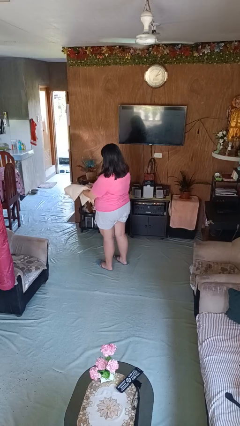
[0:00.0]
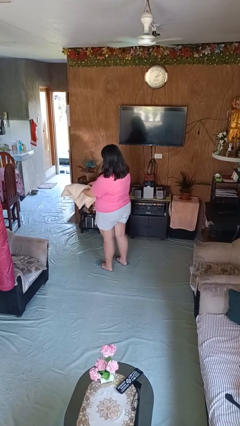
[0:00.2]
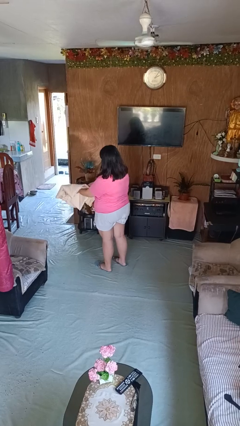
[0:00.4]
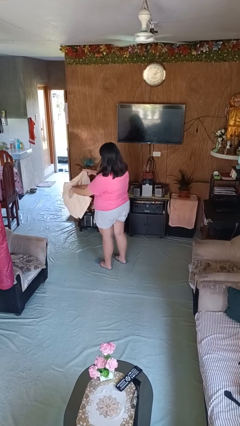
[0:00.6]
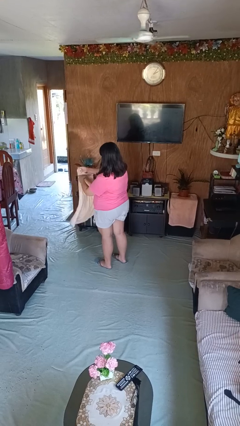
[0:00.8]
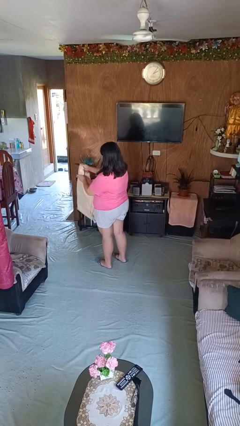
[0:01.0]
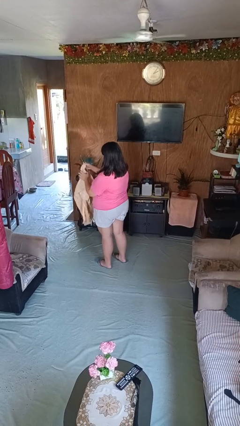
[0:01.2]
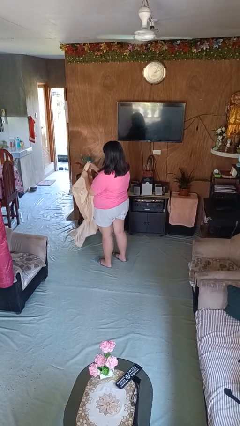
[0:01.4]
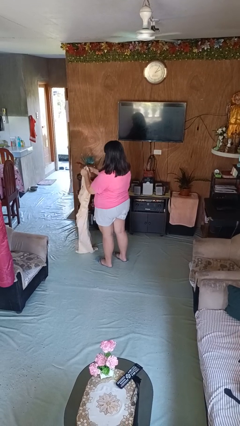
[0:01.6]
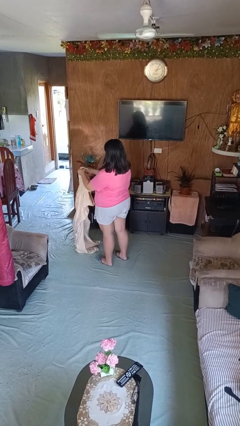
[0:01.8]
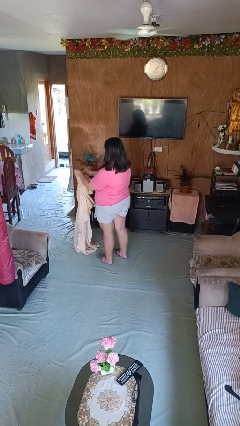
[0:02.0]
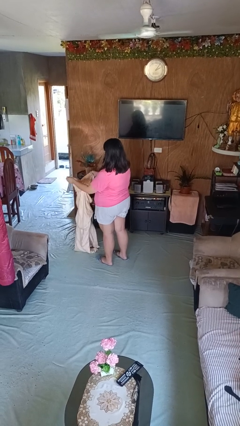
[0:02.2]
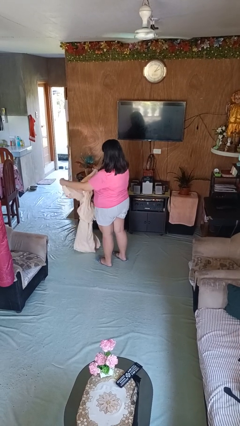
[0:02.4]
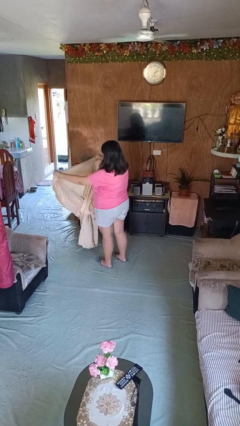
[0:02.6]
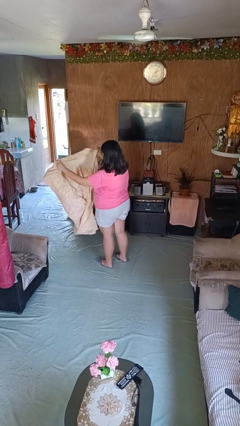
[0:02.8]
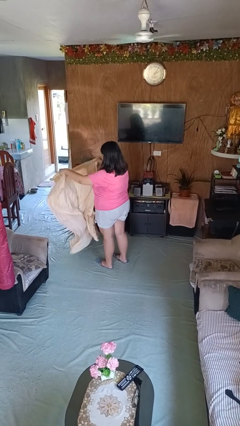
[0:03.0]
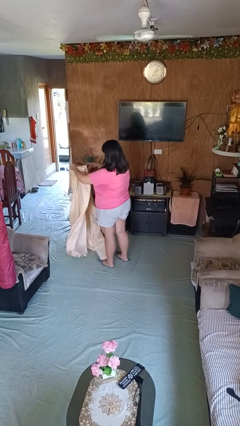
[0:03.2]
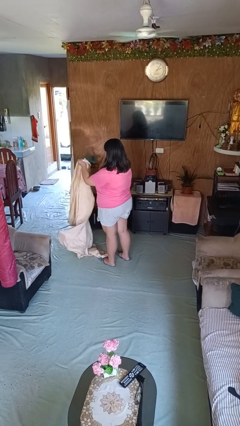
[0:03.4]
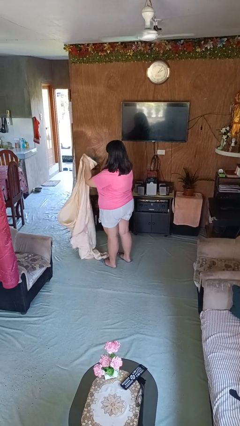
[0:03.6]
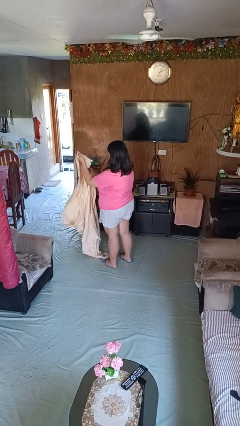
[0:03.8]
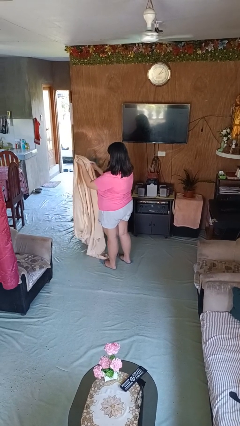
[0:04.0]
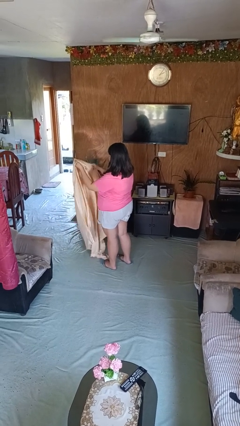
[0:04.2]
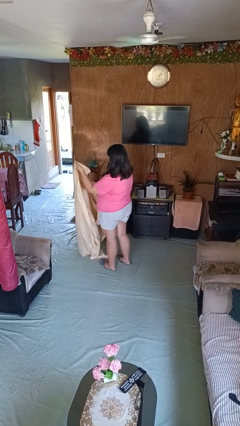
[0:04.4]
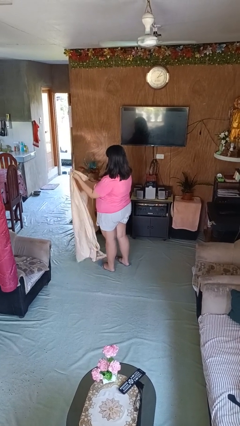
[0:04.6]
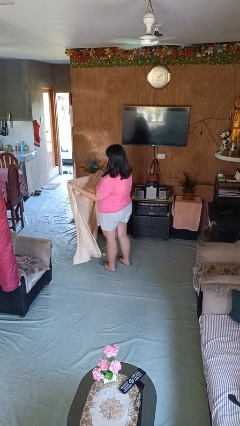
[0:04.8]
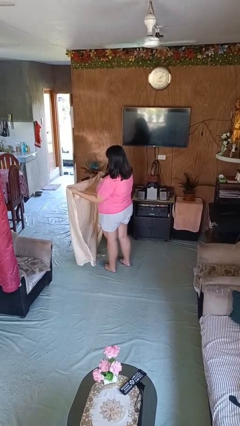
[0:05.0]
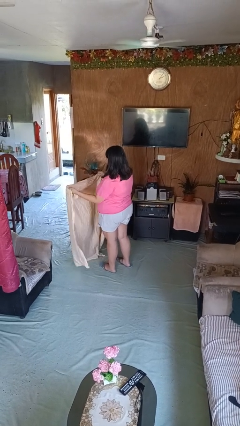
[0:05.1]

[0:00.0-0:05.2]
person unfolds blanket

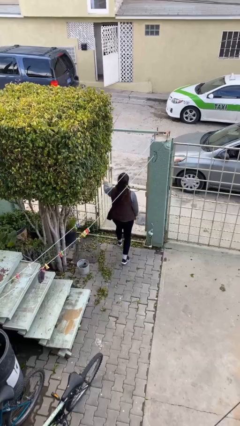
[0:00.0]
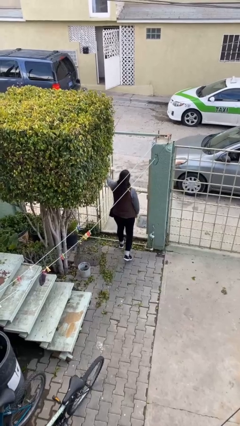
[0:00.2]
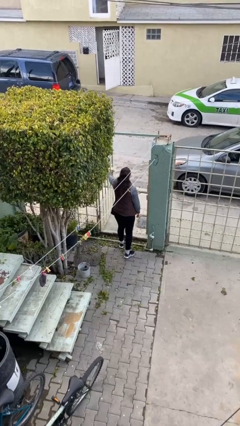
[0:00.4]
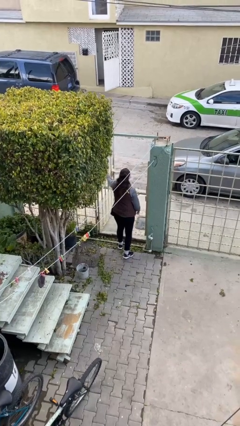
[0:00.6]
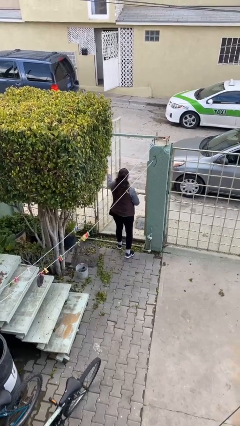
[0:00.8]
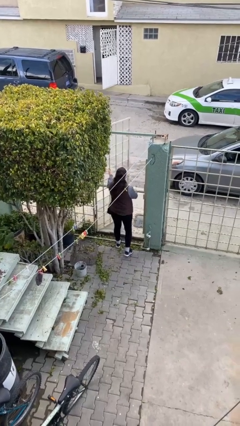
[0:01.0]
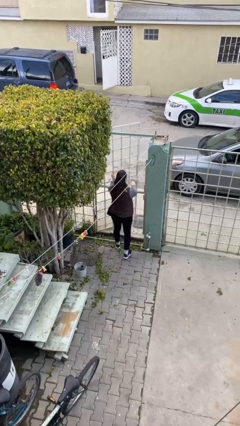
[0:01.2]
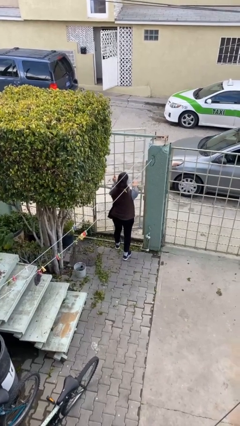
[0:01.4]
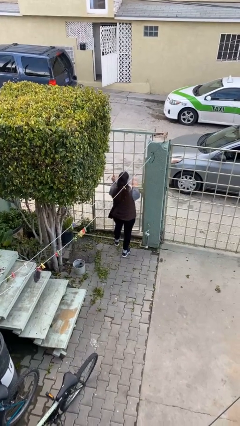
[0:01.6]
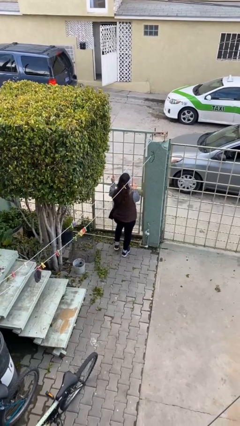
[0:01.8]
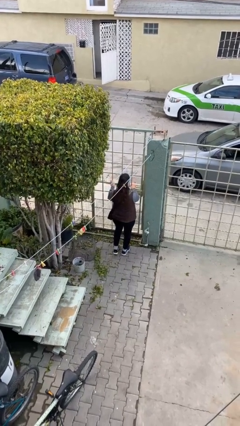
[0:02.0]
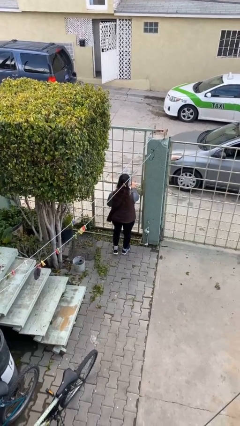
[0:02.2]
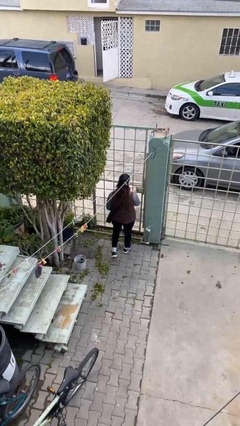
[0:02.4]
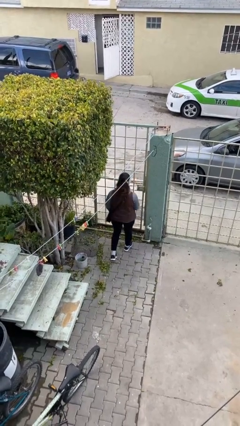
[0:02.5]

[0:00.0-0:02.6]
person closes facility door

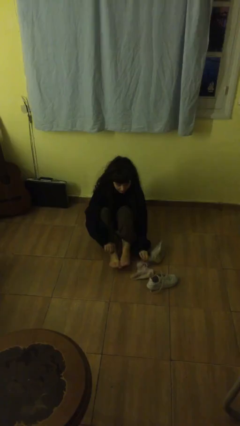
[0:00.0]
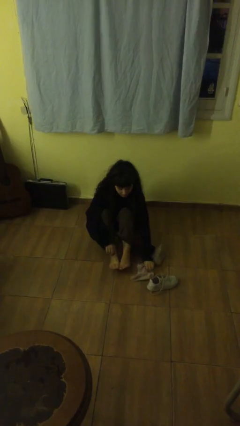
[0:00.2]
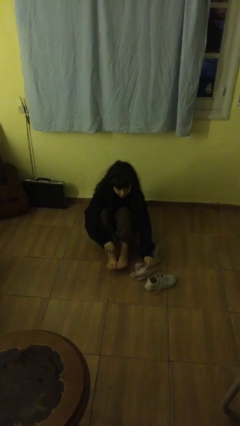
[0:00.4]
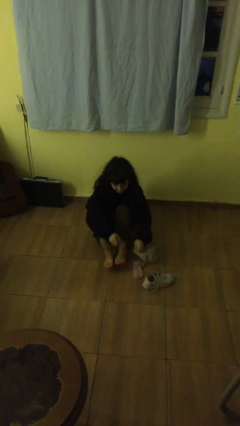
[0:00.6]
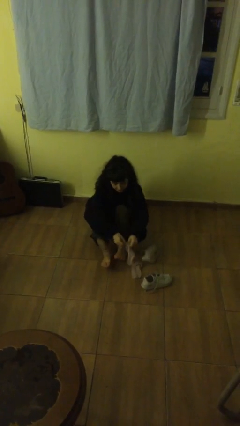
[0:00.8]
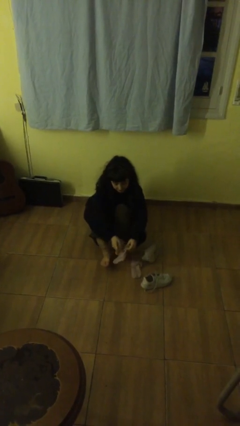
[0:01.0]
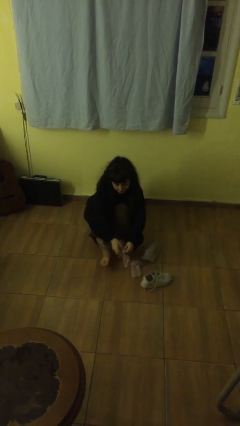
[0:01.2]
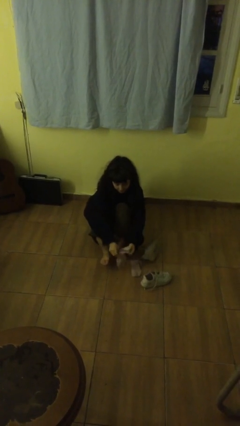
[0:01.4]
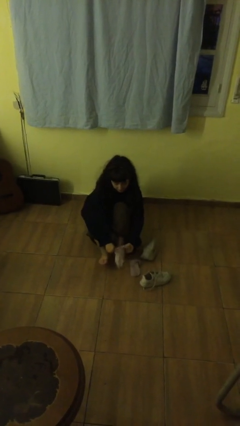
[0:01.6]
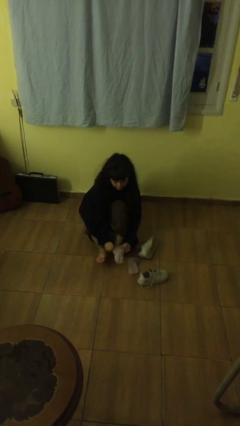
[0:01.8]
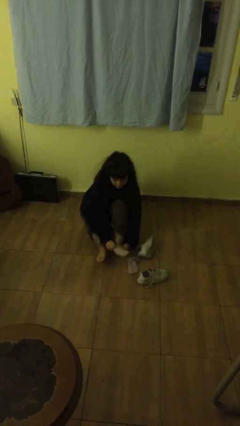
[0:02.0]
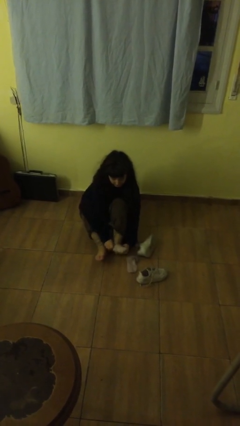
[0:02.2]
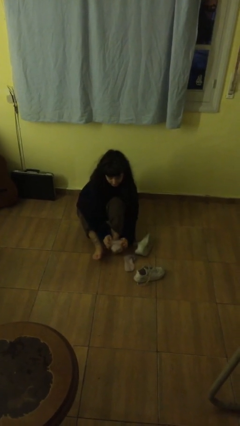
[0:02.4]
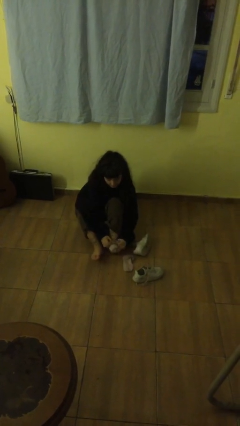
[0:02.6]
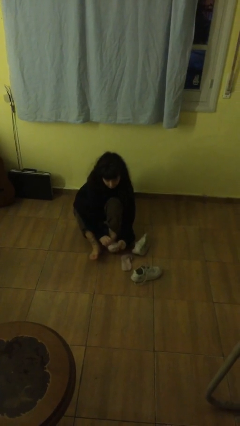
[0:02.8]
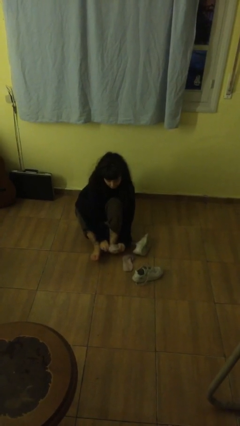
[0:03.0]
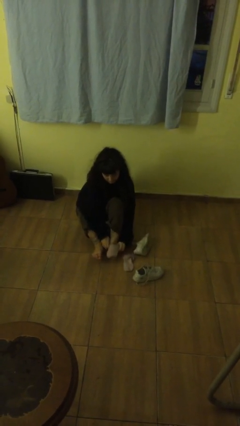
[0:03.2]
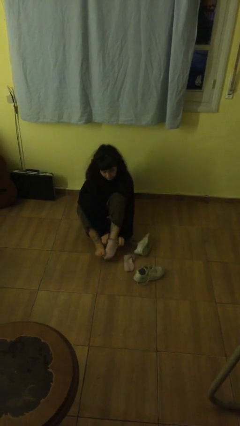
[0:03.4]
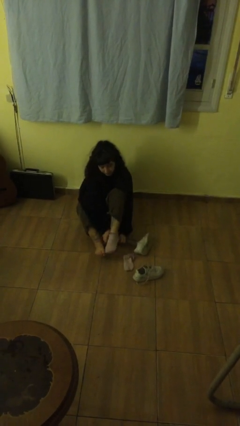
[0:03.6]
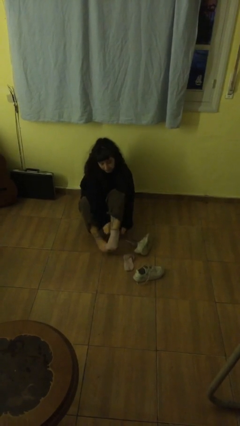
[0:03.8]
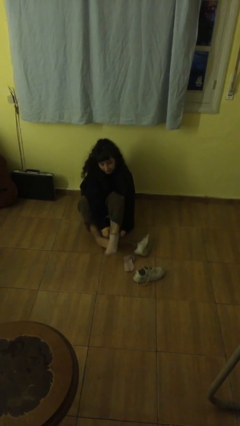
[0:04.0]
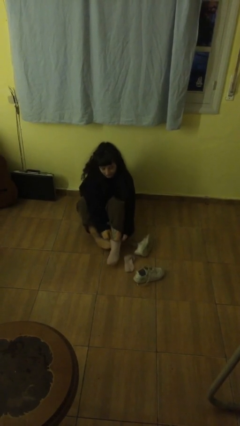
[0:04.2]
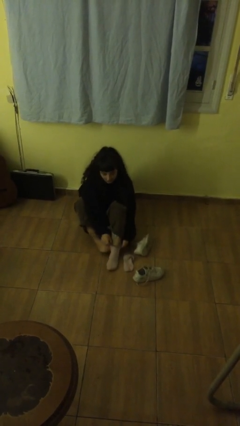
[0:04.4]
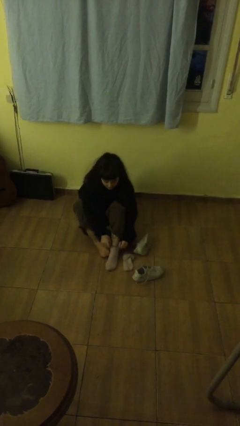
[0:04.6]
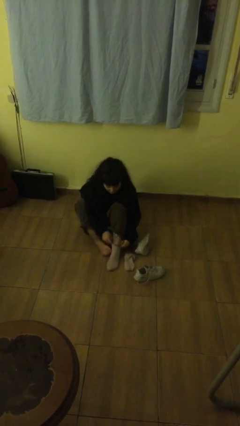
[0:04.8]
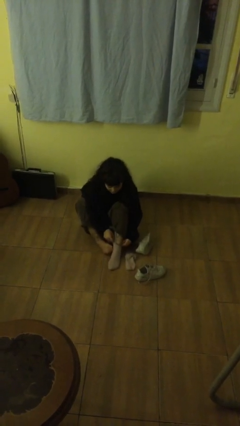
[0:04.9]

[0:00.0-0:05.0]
person puts on socks

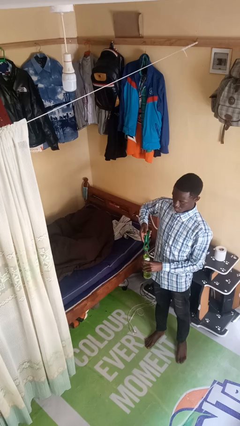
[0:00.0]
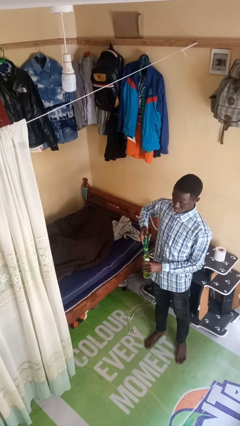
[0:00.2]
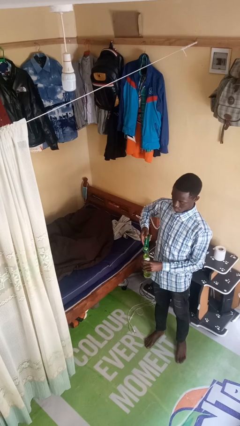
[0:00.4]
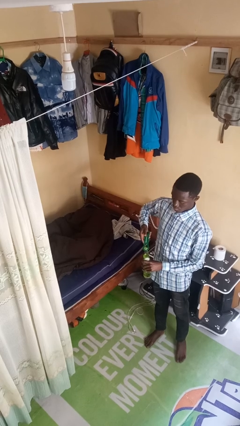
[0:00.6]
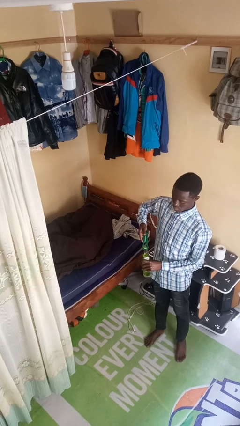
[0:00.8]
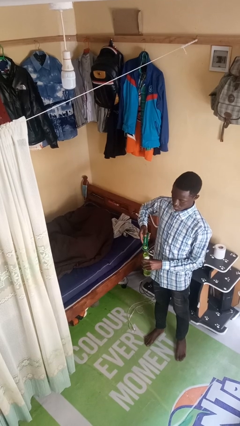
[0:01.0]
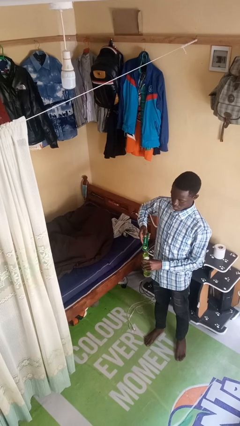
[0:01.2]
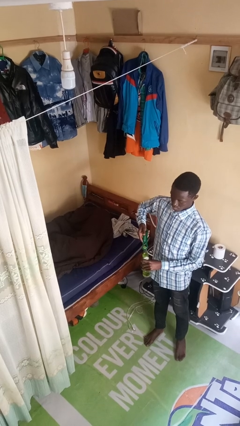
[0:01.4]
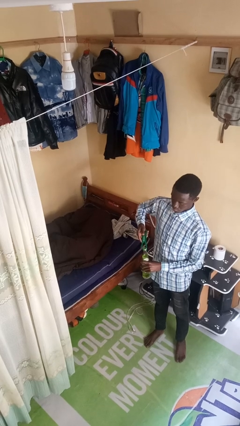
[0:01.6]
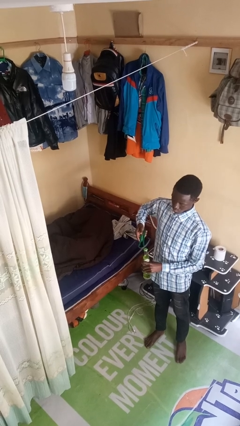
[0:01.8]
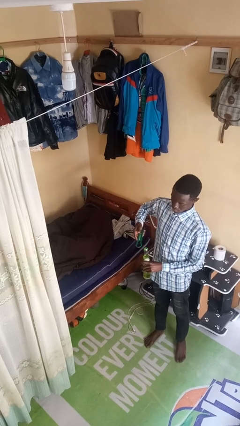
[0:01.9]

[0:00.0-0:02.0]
person opens can with can opener

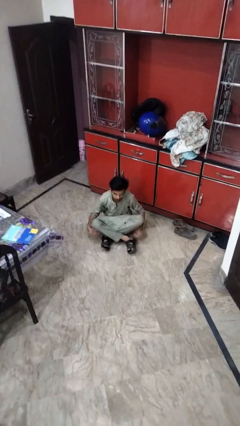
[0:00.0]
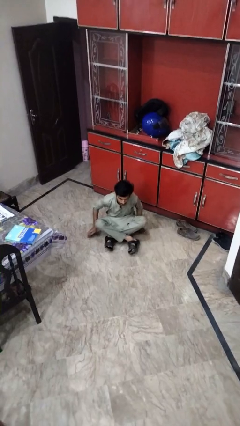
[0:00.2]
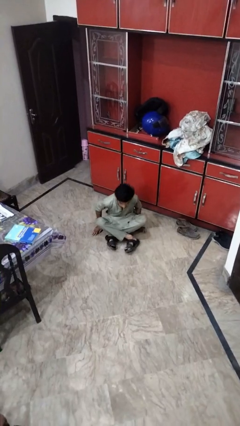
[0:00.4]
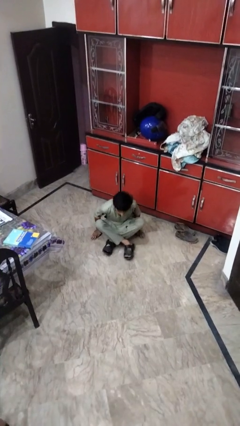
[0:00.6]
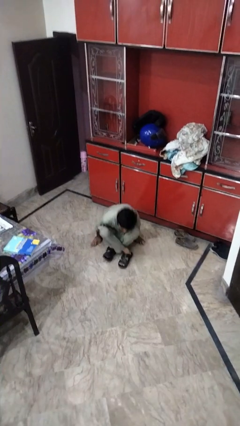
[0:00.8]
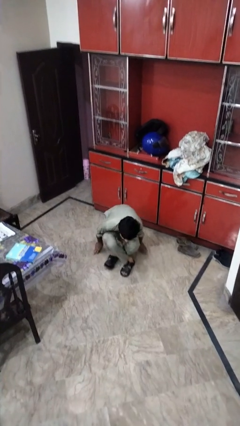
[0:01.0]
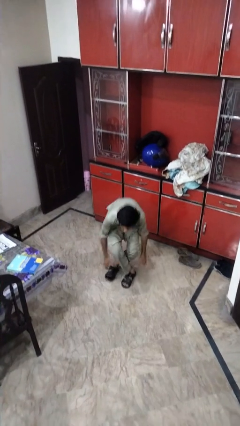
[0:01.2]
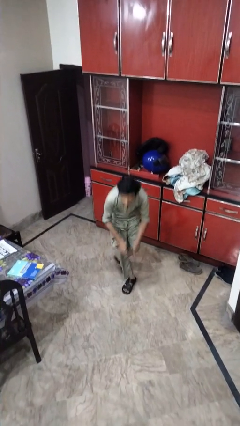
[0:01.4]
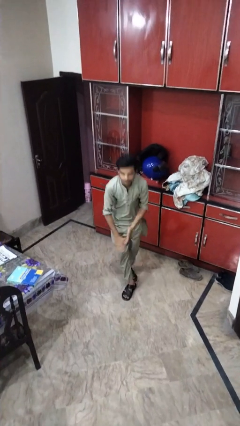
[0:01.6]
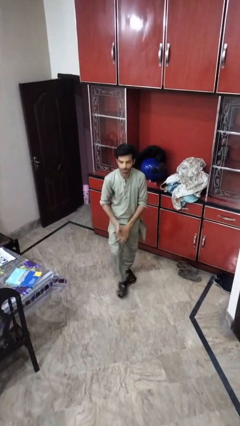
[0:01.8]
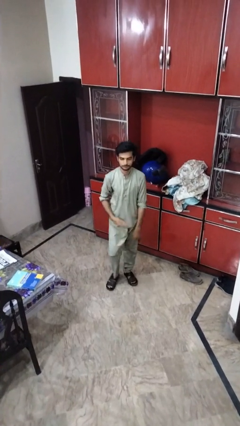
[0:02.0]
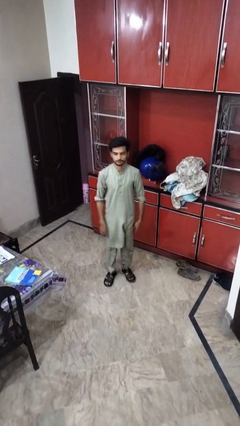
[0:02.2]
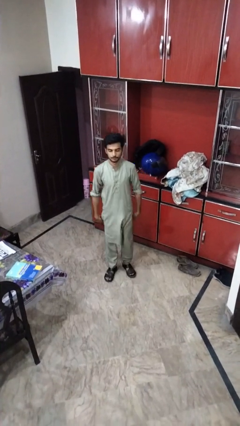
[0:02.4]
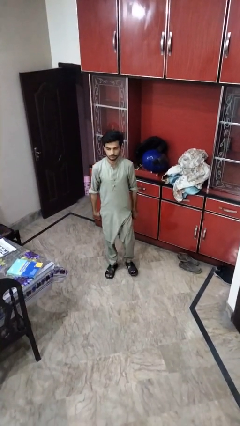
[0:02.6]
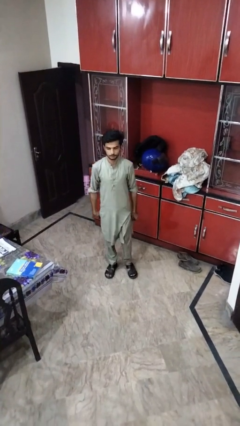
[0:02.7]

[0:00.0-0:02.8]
person stands up from floor

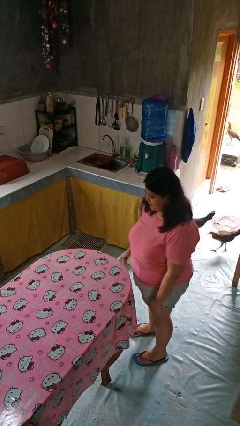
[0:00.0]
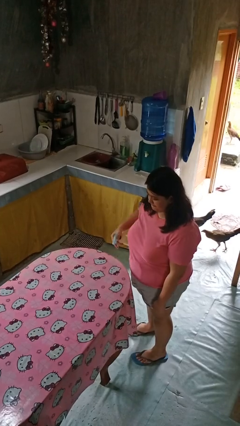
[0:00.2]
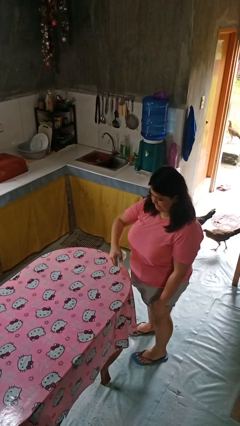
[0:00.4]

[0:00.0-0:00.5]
person sprays from bottle
